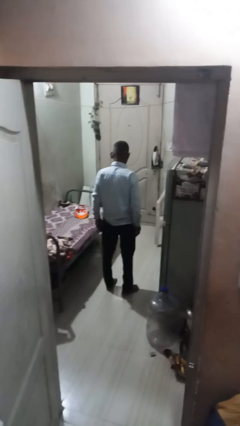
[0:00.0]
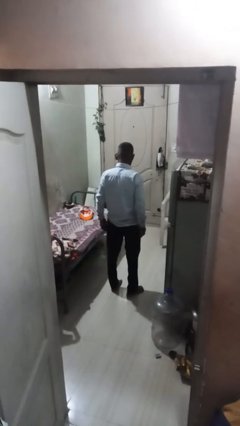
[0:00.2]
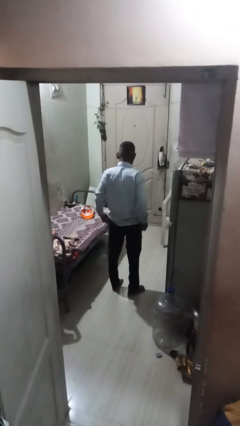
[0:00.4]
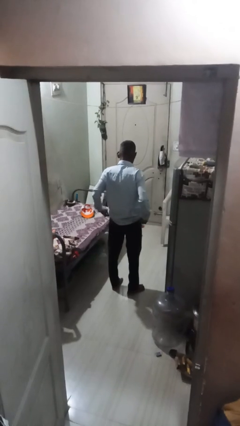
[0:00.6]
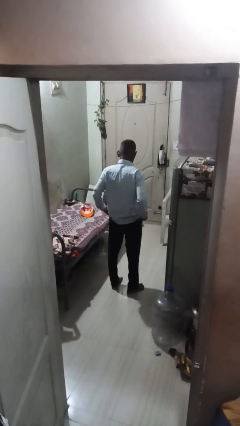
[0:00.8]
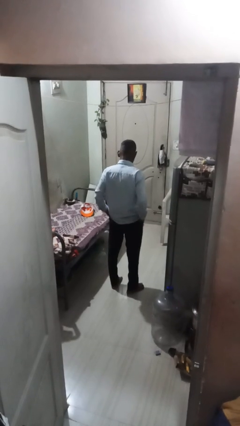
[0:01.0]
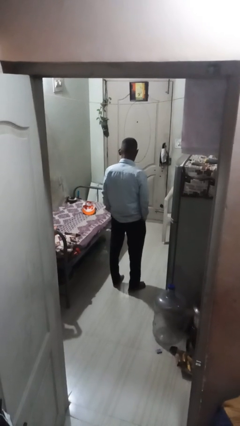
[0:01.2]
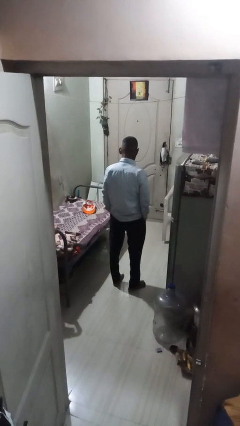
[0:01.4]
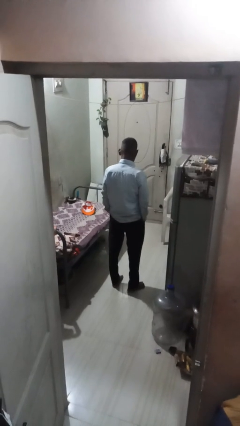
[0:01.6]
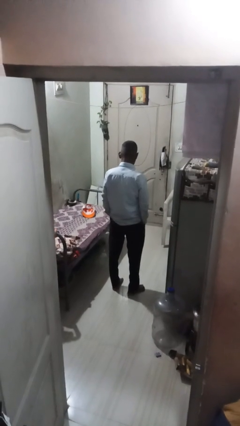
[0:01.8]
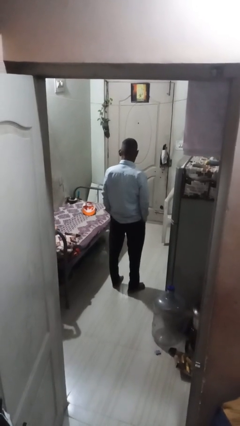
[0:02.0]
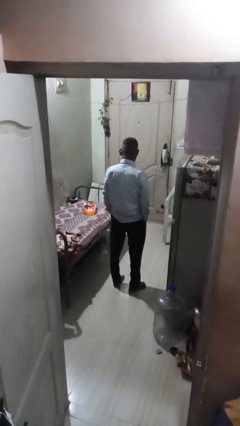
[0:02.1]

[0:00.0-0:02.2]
person puts hands in back pockets

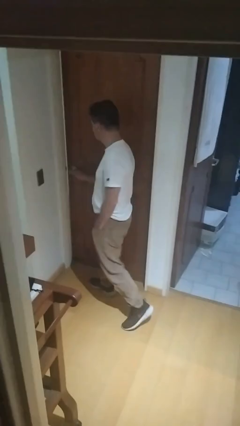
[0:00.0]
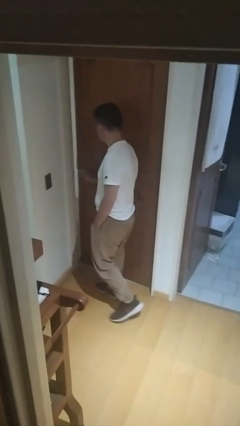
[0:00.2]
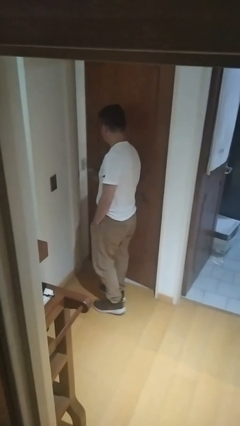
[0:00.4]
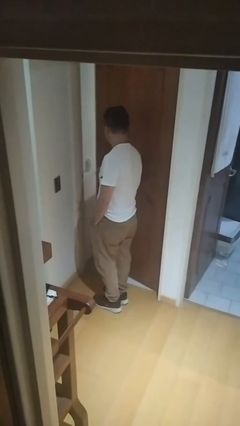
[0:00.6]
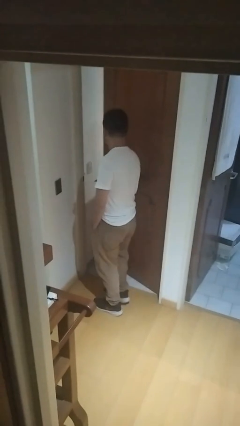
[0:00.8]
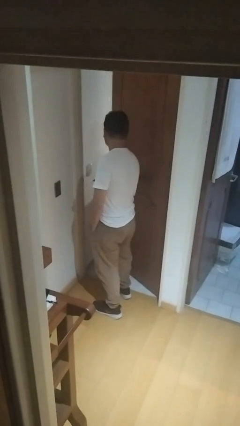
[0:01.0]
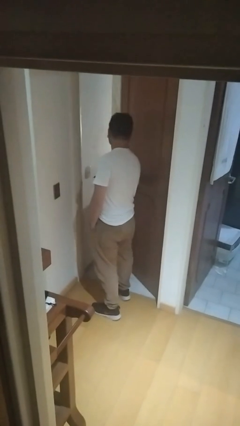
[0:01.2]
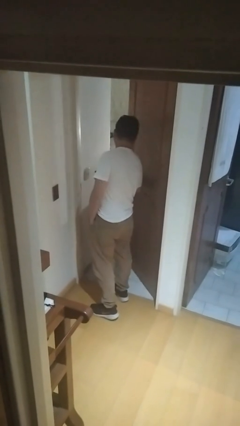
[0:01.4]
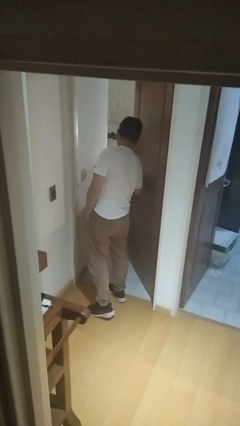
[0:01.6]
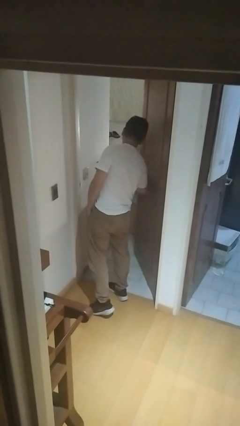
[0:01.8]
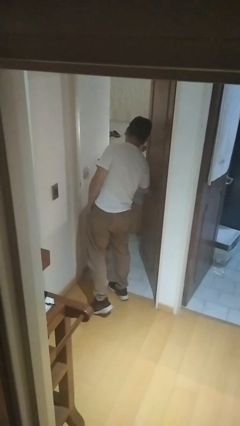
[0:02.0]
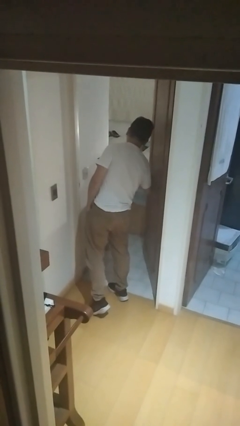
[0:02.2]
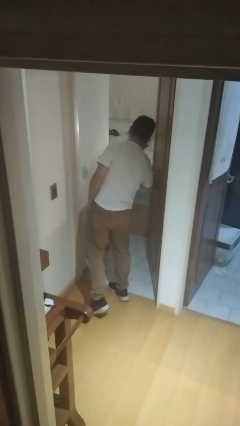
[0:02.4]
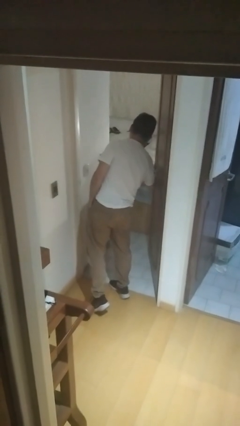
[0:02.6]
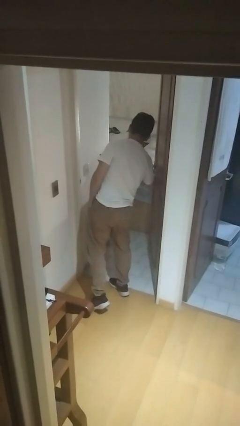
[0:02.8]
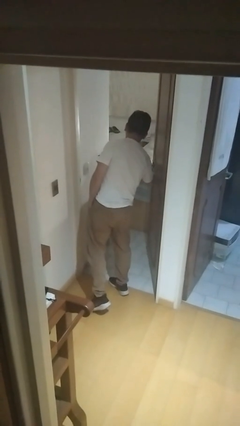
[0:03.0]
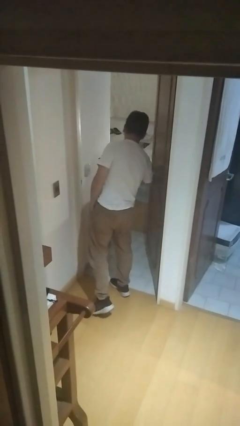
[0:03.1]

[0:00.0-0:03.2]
person opens facility door

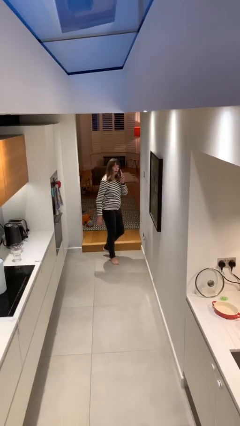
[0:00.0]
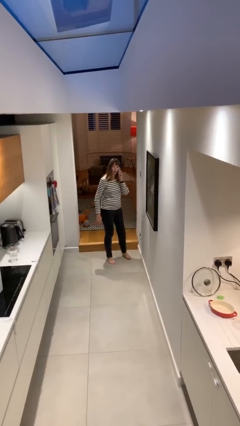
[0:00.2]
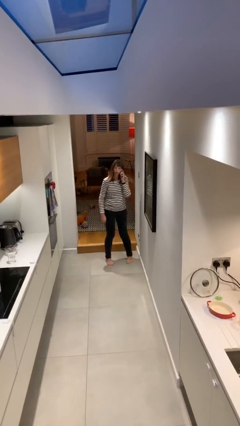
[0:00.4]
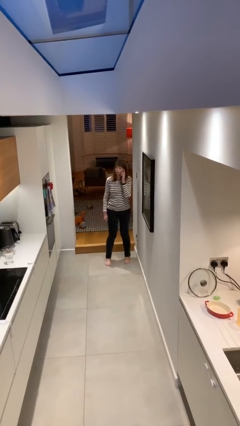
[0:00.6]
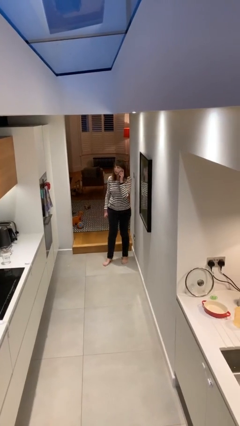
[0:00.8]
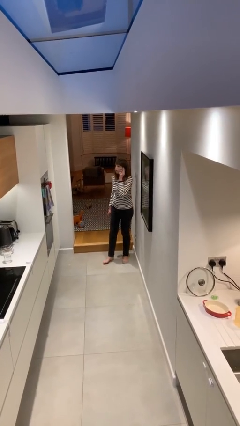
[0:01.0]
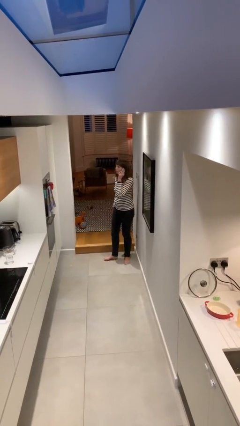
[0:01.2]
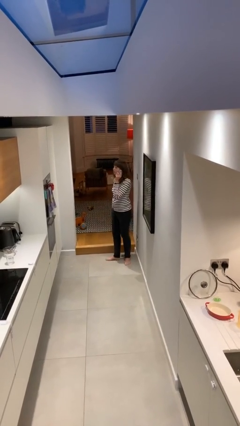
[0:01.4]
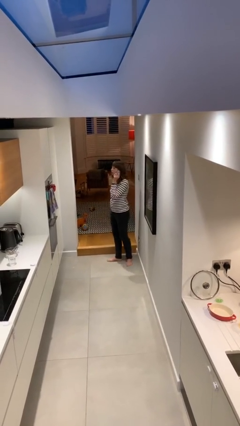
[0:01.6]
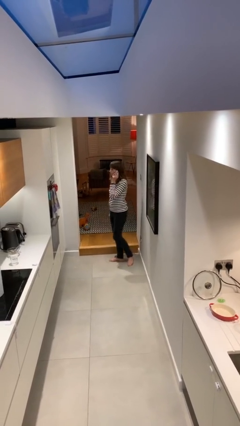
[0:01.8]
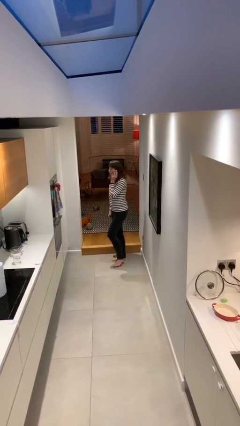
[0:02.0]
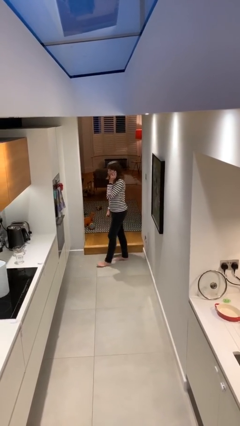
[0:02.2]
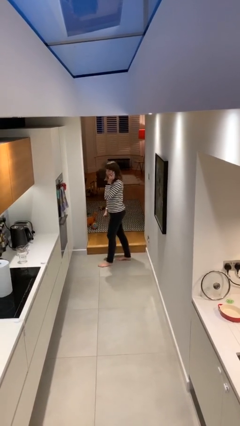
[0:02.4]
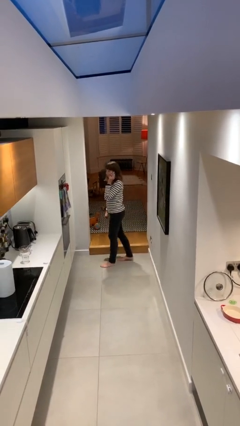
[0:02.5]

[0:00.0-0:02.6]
person talks on phone

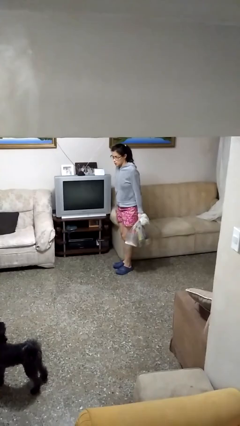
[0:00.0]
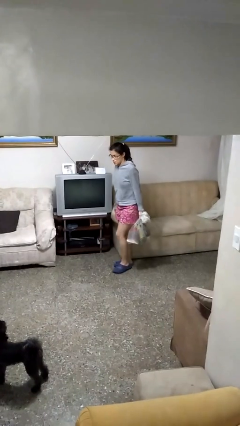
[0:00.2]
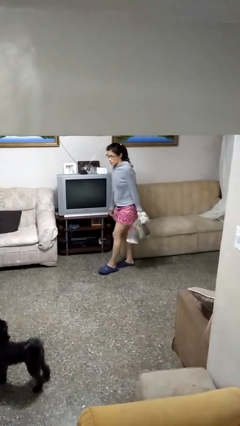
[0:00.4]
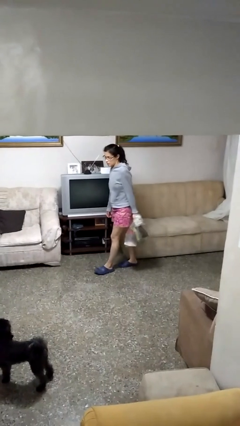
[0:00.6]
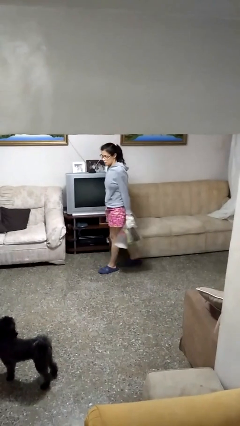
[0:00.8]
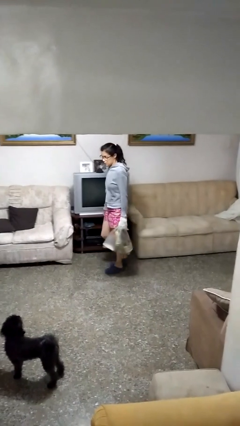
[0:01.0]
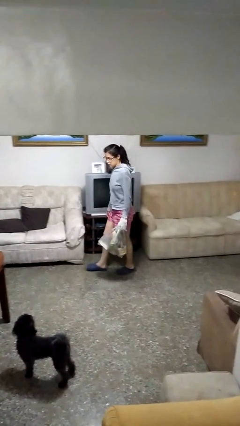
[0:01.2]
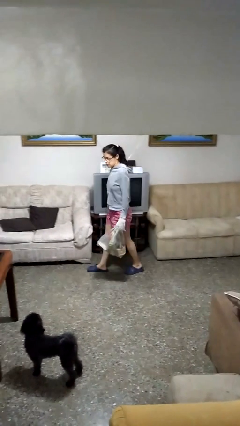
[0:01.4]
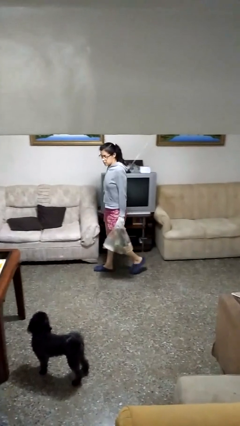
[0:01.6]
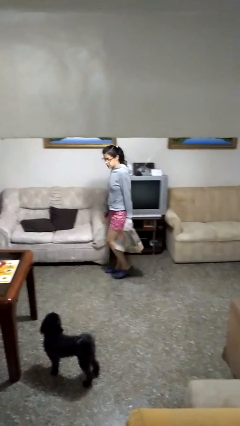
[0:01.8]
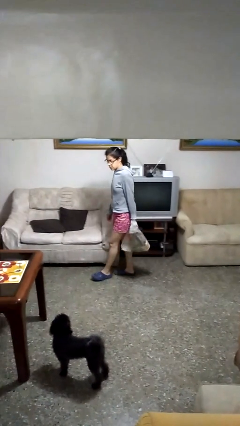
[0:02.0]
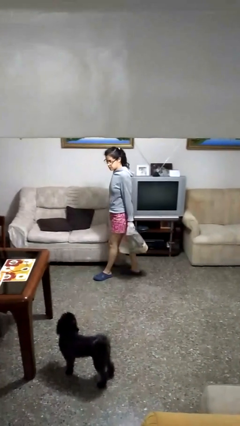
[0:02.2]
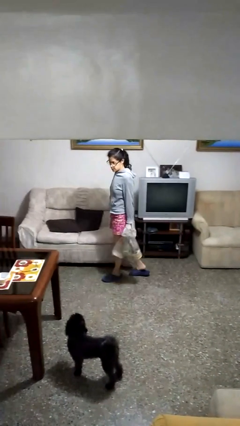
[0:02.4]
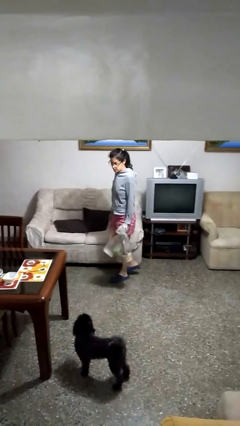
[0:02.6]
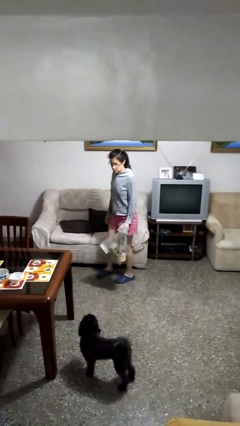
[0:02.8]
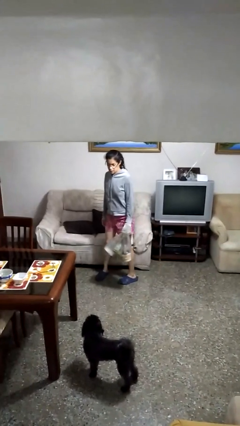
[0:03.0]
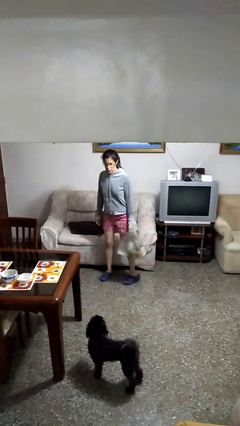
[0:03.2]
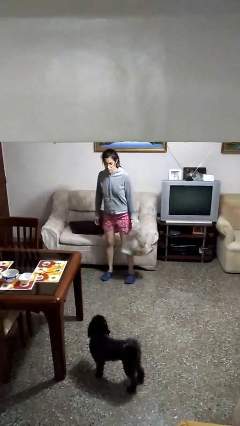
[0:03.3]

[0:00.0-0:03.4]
person carries groceries

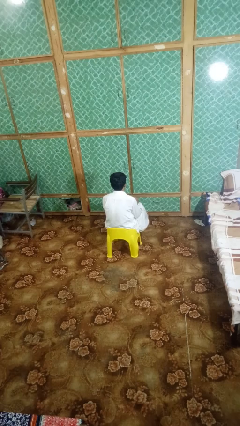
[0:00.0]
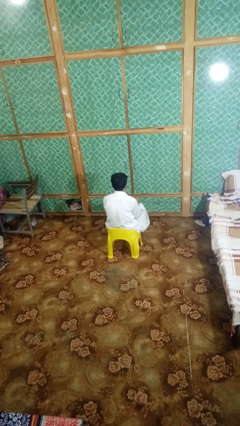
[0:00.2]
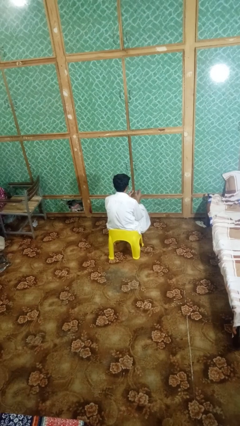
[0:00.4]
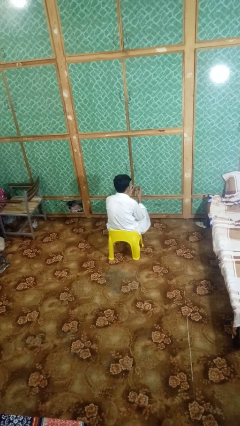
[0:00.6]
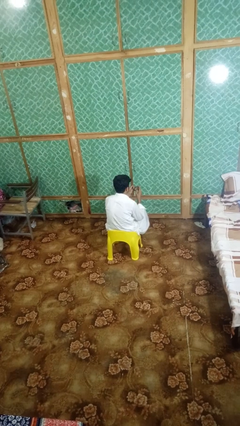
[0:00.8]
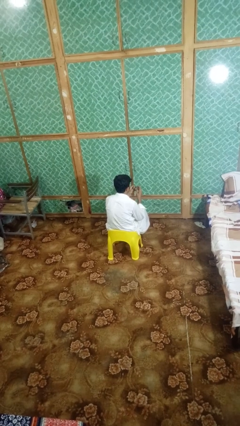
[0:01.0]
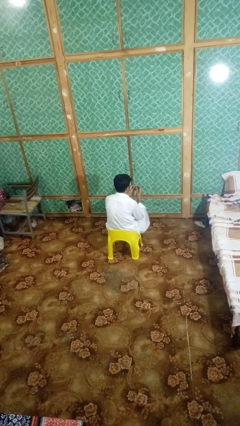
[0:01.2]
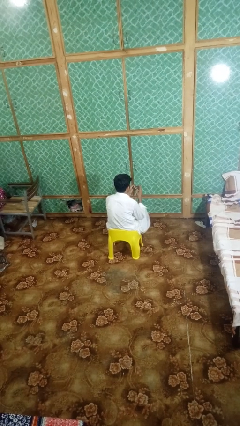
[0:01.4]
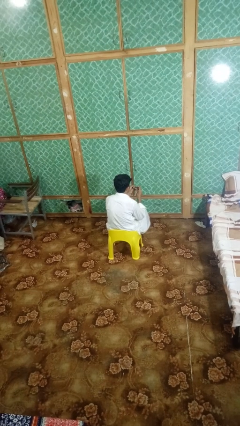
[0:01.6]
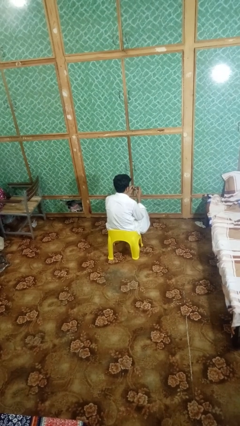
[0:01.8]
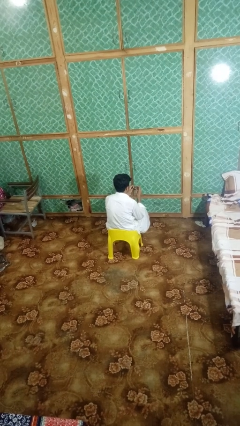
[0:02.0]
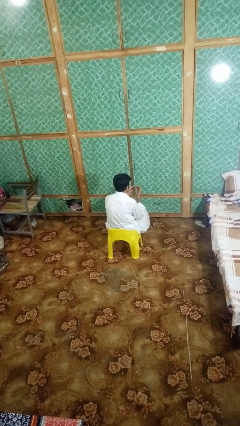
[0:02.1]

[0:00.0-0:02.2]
person clips fingernails

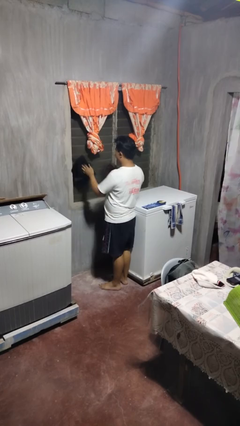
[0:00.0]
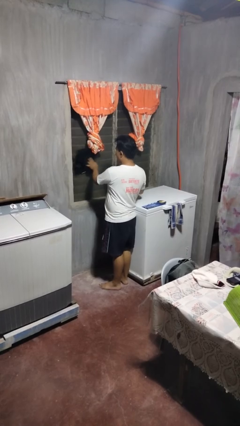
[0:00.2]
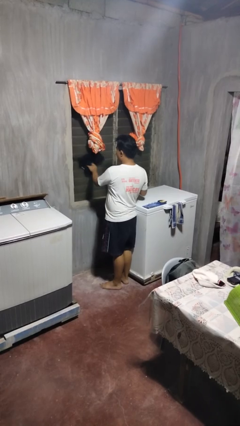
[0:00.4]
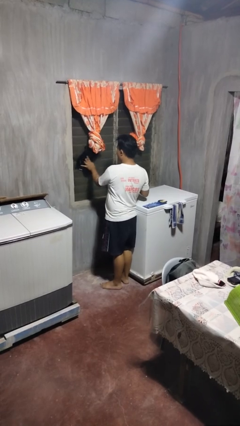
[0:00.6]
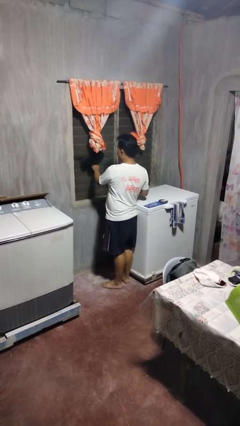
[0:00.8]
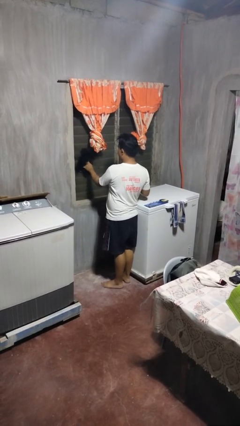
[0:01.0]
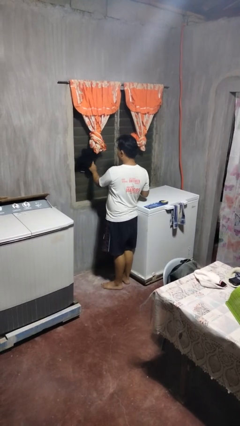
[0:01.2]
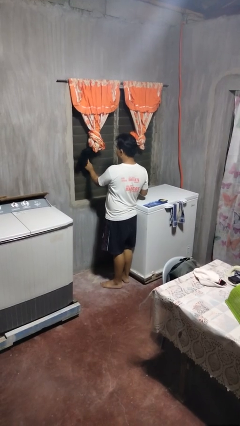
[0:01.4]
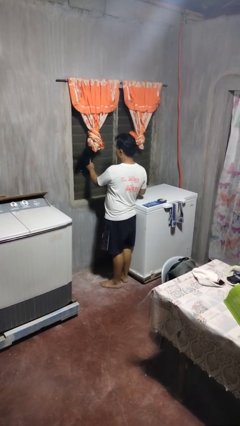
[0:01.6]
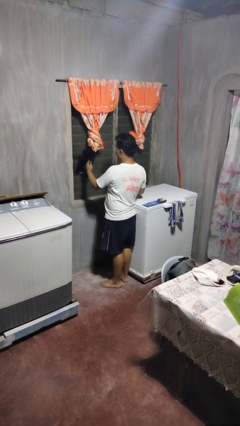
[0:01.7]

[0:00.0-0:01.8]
person washes window

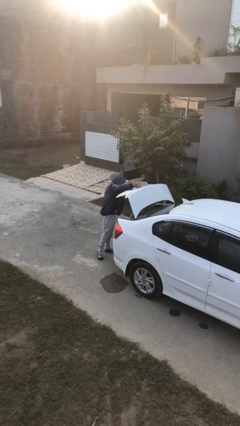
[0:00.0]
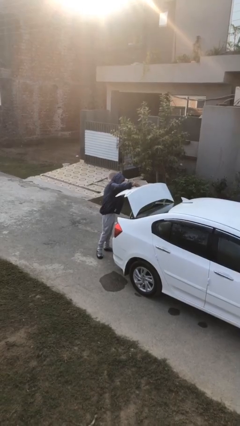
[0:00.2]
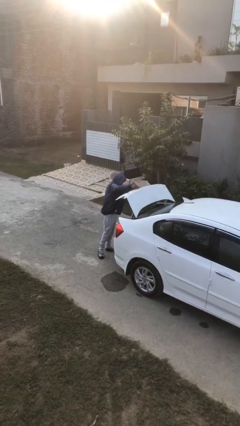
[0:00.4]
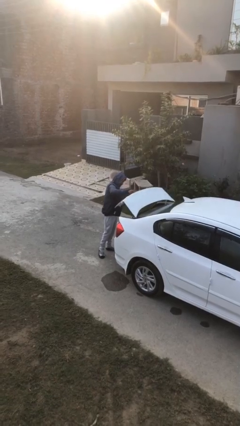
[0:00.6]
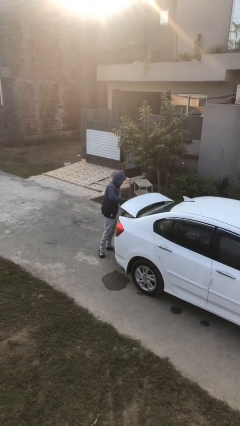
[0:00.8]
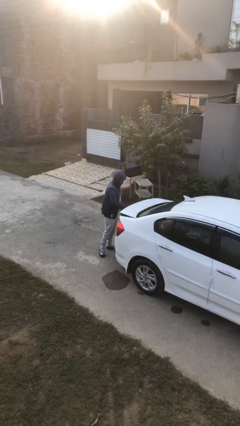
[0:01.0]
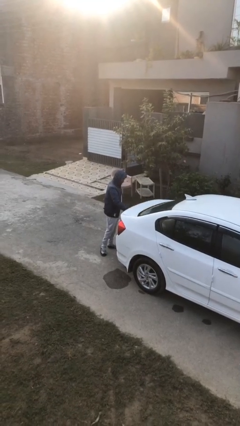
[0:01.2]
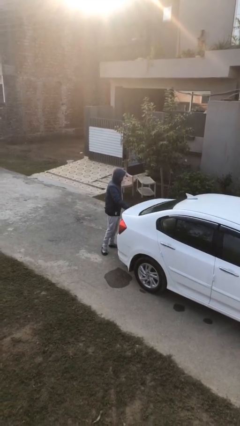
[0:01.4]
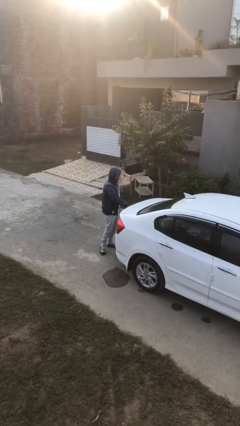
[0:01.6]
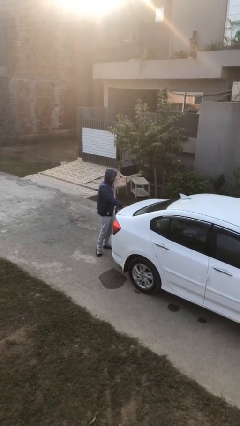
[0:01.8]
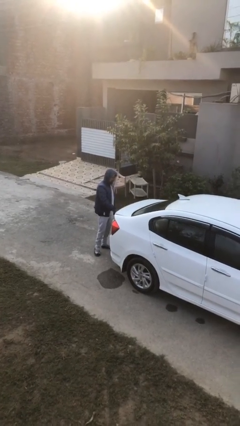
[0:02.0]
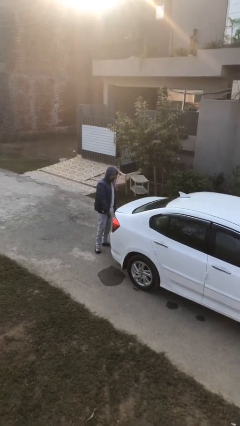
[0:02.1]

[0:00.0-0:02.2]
person closes car trunk
